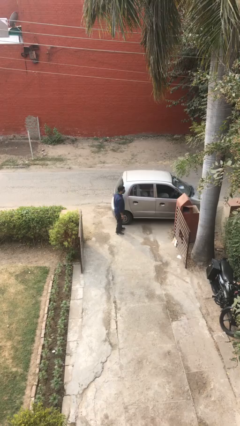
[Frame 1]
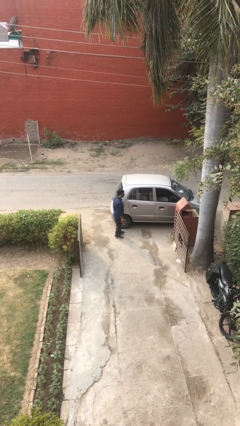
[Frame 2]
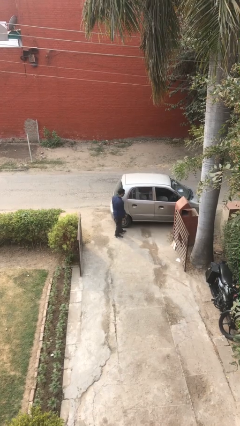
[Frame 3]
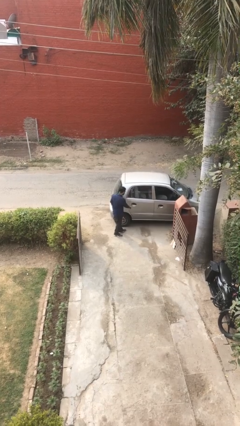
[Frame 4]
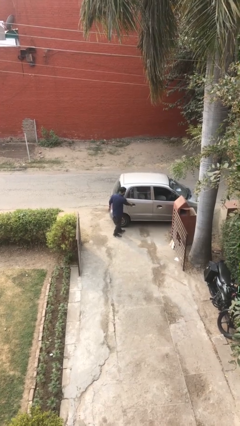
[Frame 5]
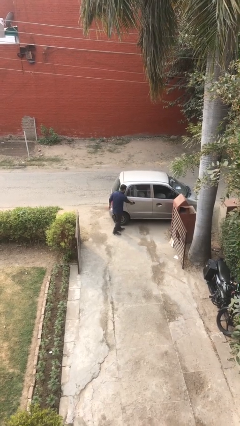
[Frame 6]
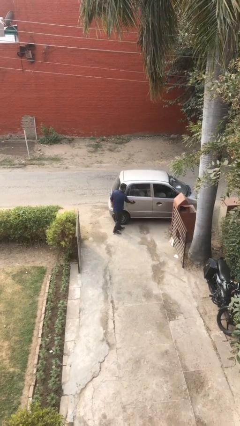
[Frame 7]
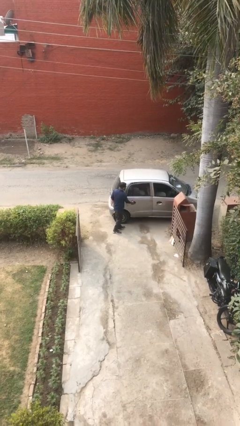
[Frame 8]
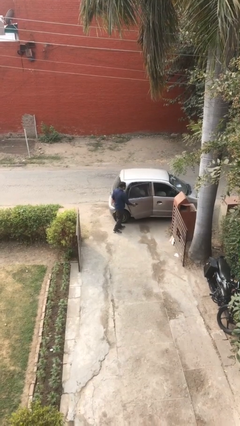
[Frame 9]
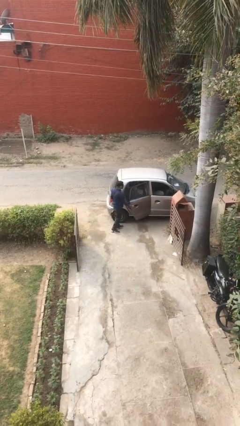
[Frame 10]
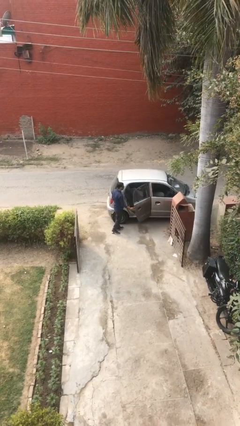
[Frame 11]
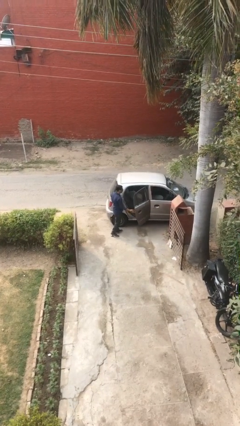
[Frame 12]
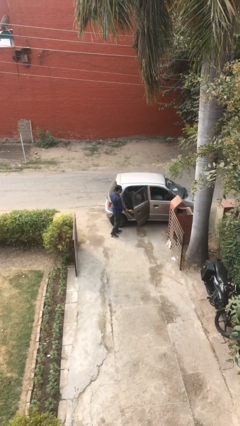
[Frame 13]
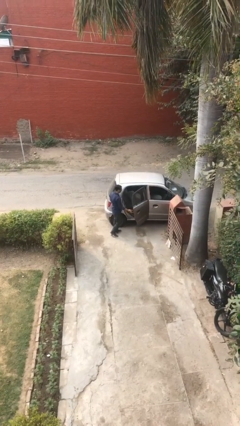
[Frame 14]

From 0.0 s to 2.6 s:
person opens car door

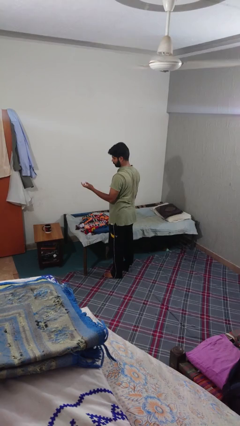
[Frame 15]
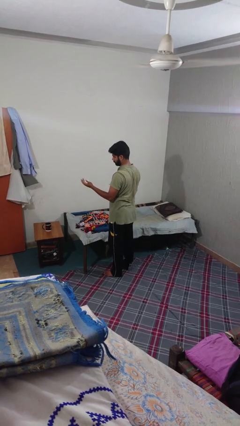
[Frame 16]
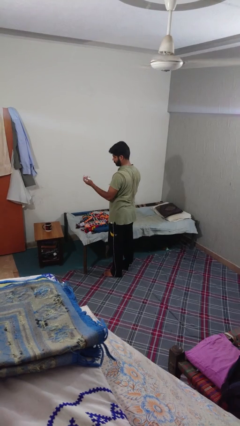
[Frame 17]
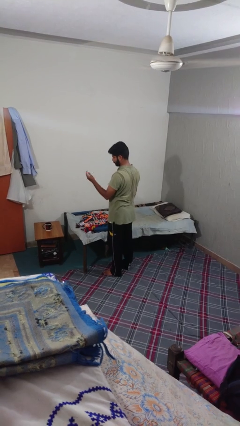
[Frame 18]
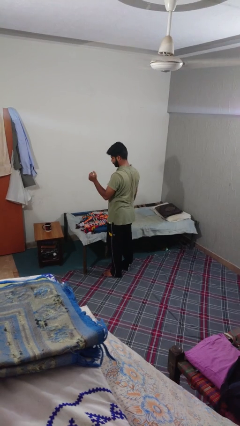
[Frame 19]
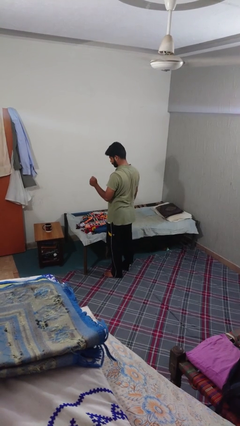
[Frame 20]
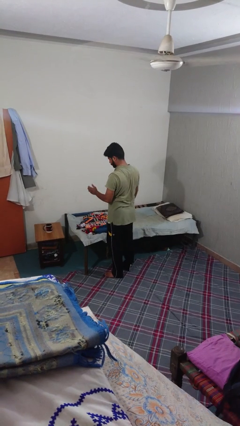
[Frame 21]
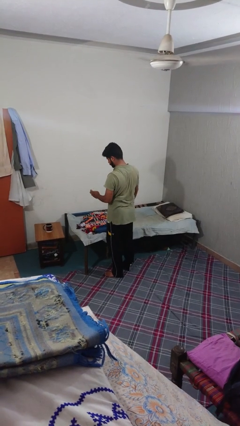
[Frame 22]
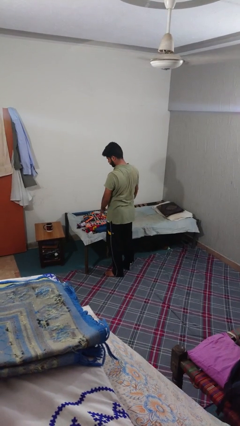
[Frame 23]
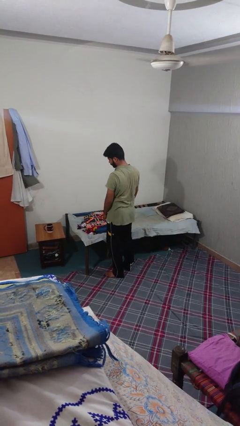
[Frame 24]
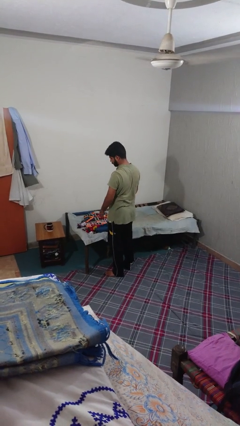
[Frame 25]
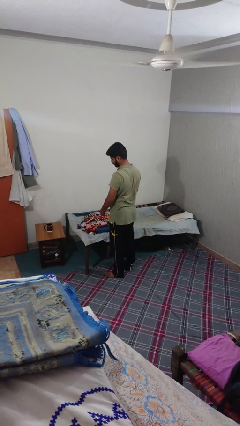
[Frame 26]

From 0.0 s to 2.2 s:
person crumples paper

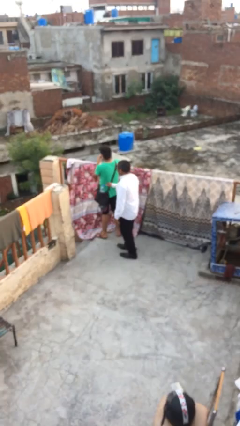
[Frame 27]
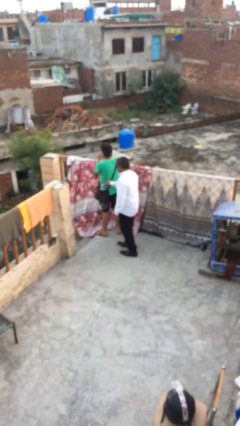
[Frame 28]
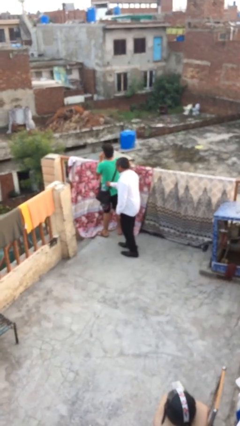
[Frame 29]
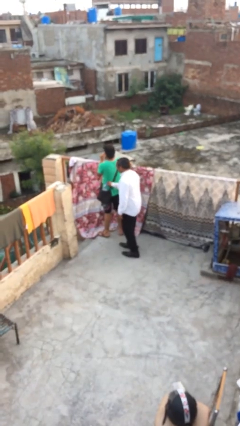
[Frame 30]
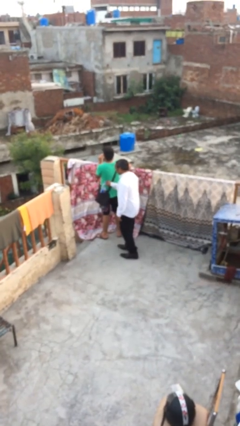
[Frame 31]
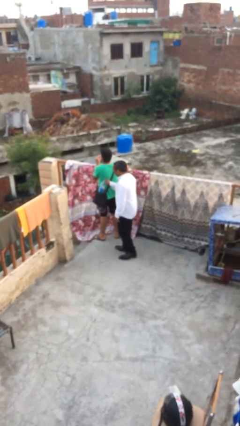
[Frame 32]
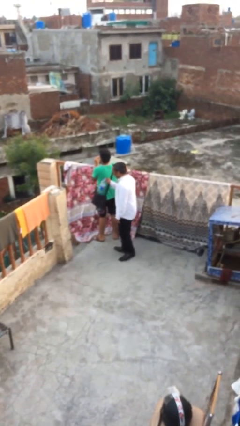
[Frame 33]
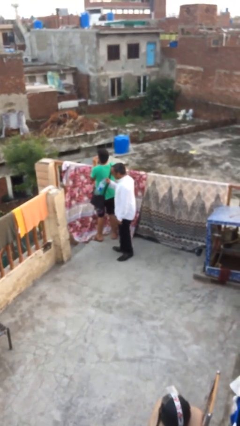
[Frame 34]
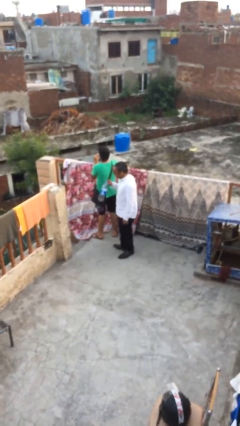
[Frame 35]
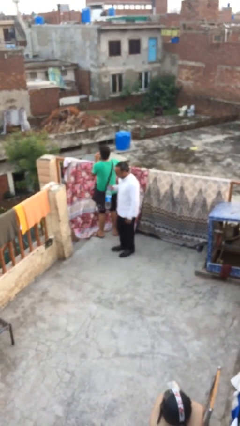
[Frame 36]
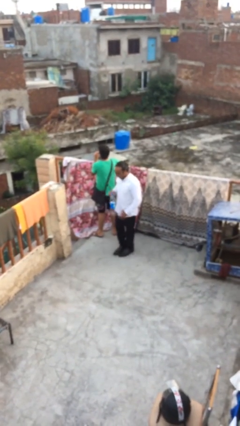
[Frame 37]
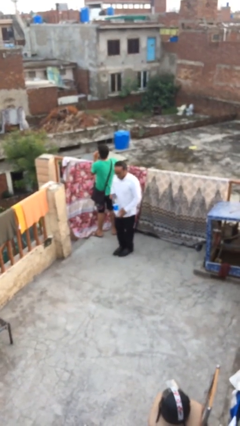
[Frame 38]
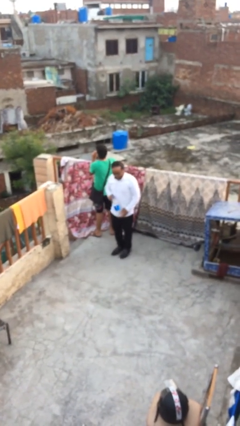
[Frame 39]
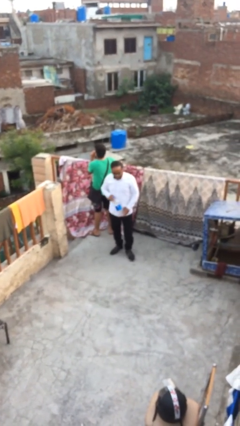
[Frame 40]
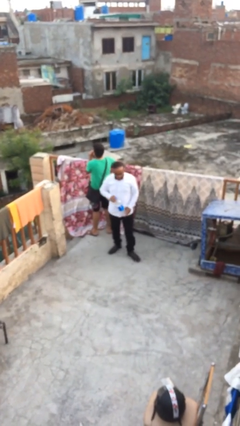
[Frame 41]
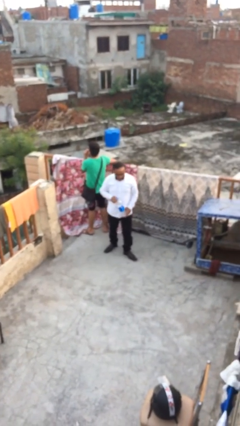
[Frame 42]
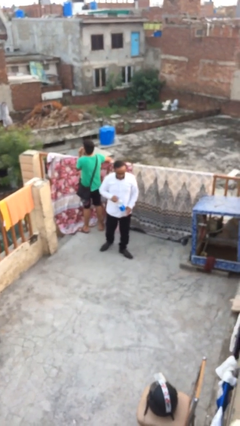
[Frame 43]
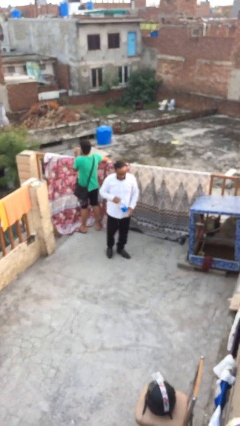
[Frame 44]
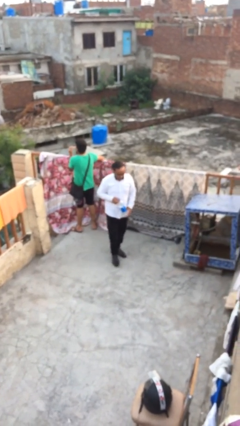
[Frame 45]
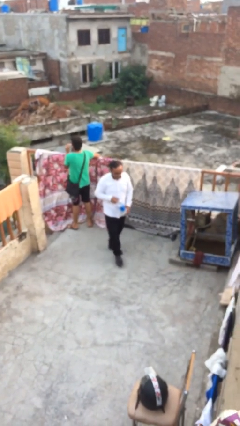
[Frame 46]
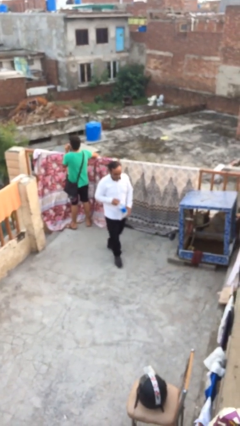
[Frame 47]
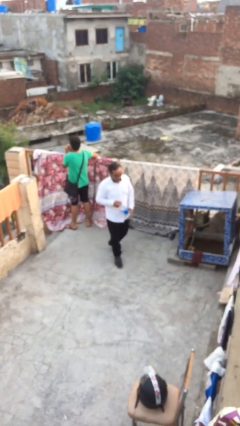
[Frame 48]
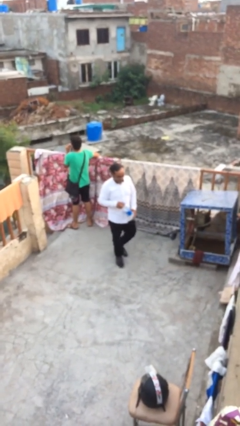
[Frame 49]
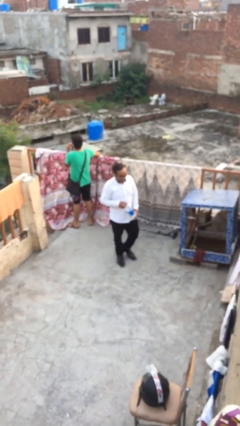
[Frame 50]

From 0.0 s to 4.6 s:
person steals object from person

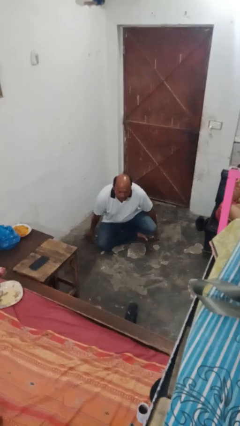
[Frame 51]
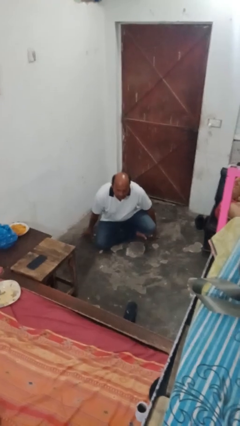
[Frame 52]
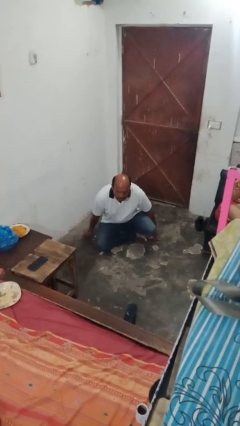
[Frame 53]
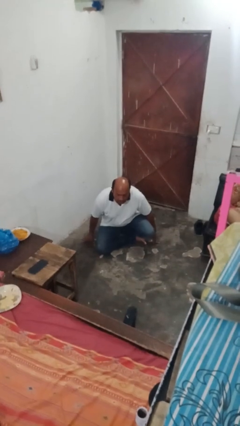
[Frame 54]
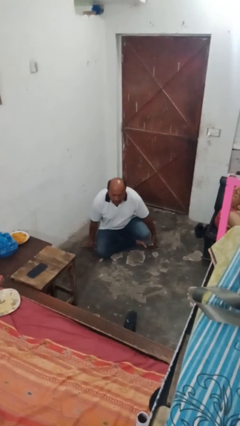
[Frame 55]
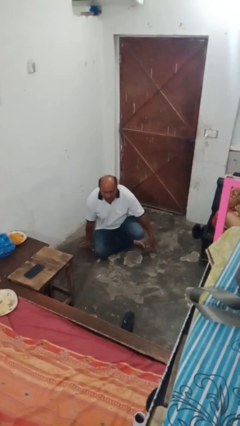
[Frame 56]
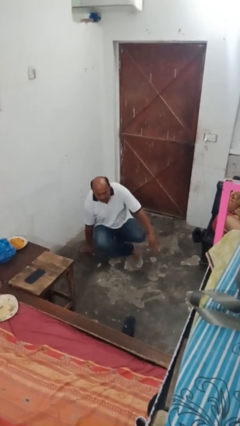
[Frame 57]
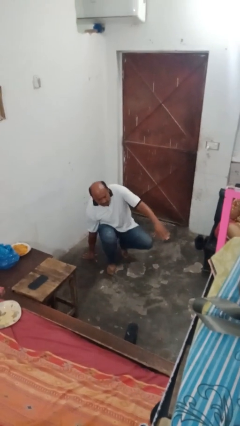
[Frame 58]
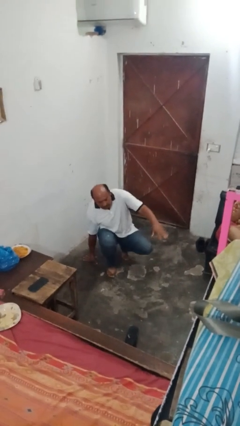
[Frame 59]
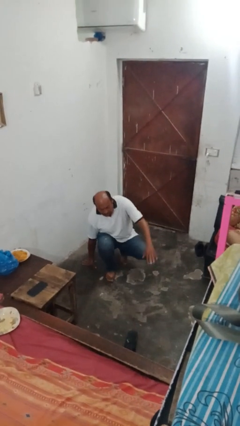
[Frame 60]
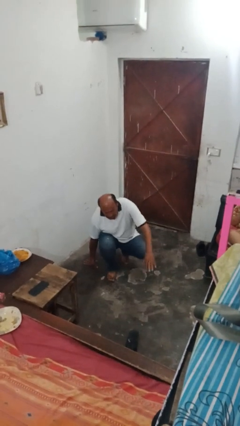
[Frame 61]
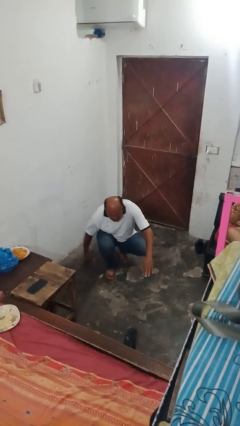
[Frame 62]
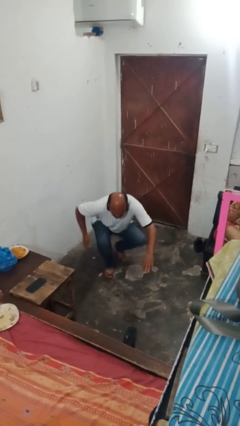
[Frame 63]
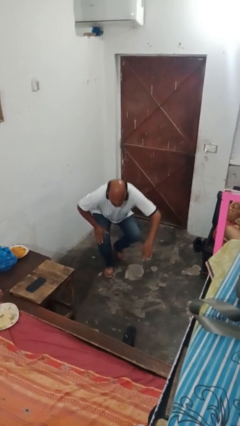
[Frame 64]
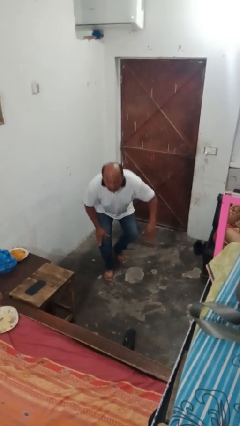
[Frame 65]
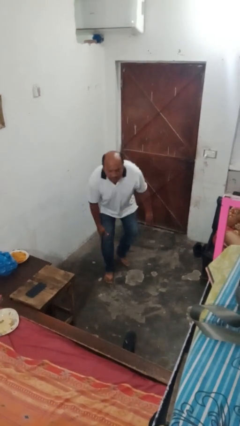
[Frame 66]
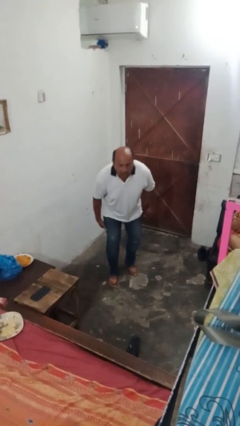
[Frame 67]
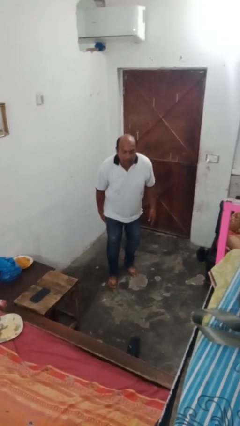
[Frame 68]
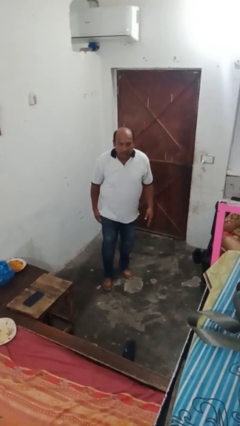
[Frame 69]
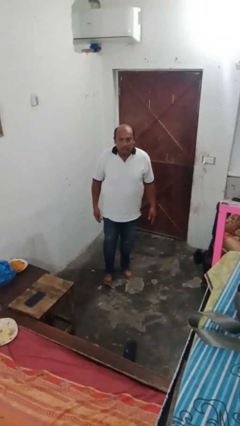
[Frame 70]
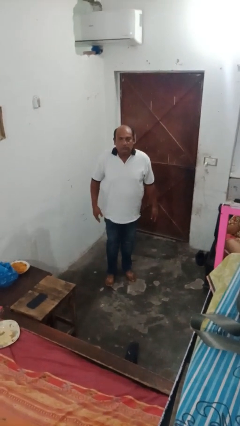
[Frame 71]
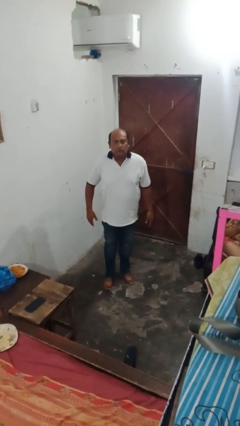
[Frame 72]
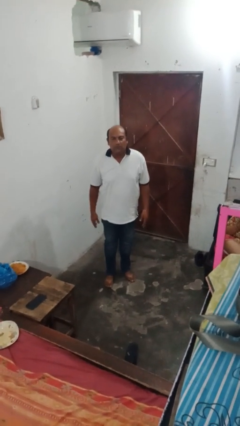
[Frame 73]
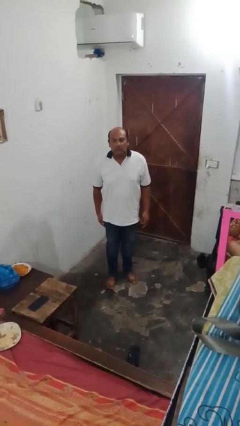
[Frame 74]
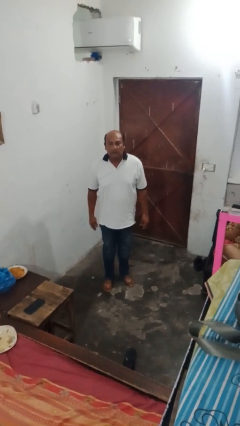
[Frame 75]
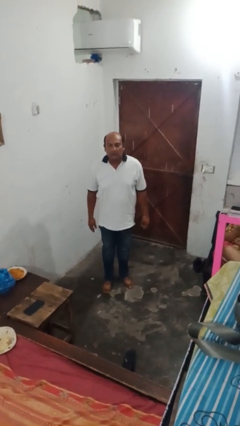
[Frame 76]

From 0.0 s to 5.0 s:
person stands up from floor

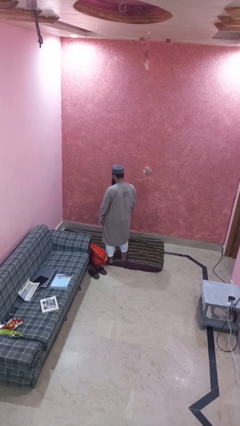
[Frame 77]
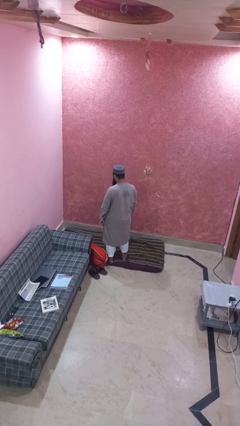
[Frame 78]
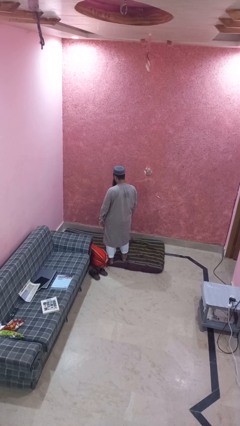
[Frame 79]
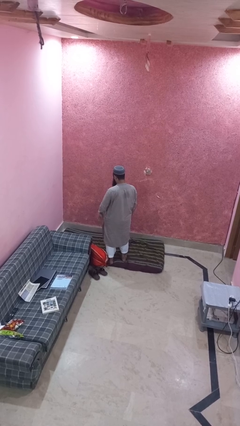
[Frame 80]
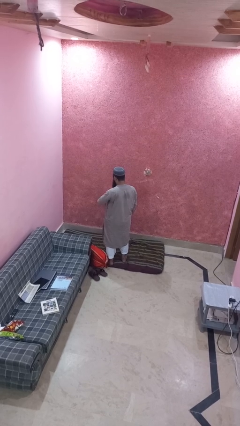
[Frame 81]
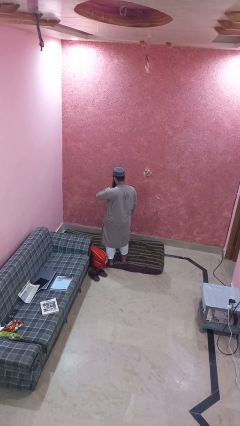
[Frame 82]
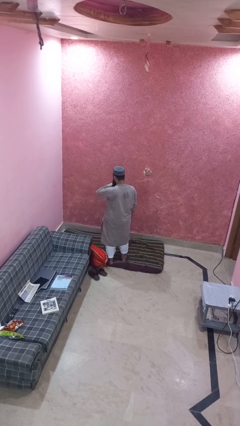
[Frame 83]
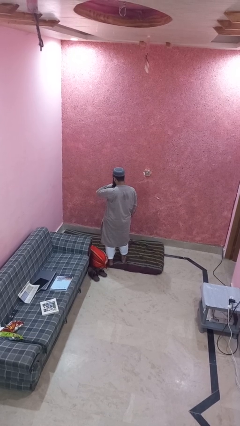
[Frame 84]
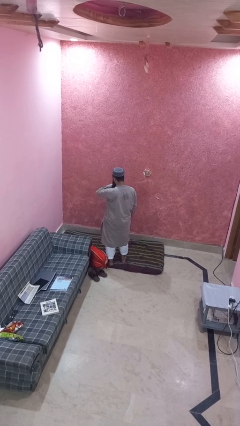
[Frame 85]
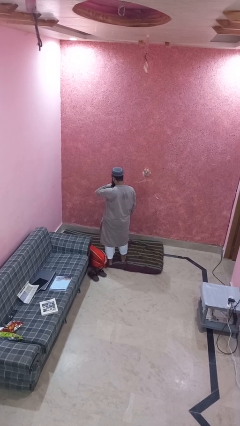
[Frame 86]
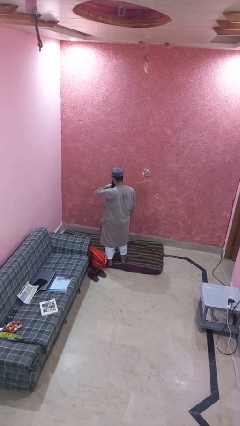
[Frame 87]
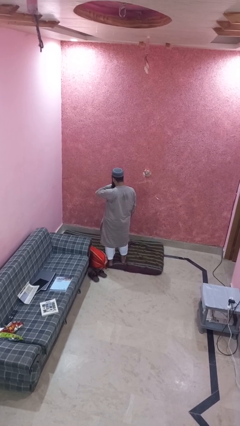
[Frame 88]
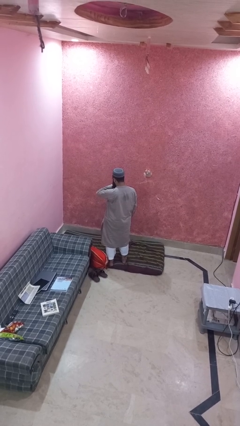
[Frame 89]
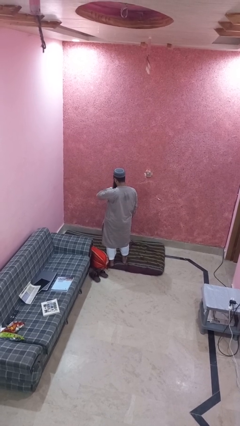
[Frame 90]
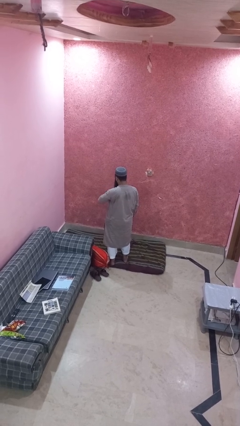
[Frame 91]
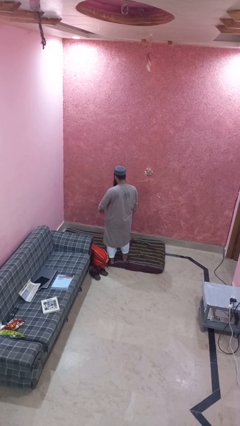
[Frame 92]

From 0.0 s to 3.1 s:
person looks at wristwatch
